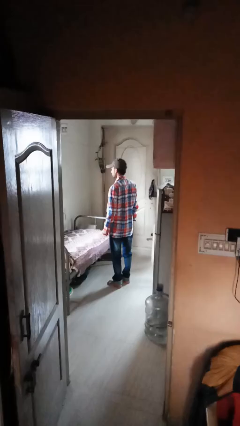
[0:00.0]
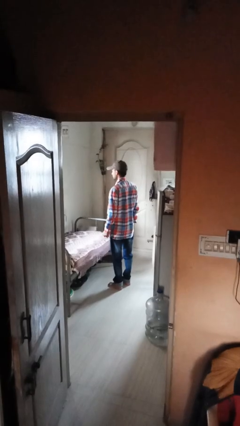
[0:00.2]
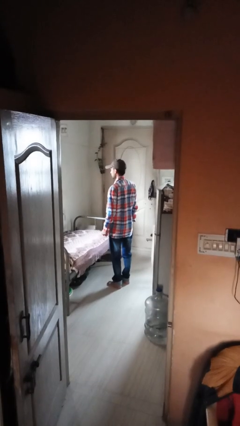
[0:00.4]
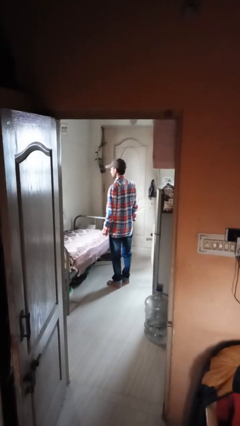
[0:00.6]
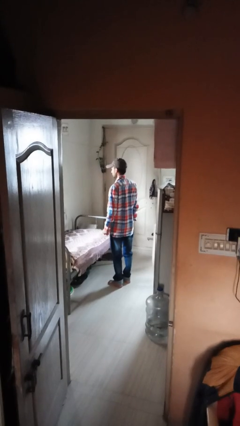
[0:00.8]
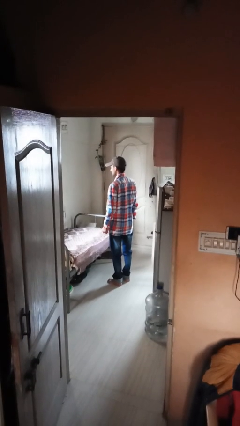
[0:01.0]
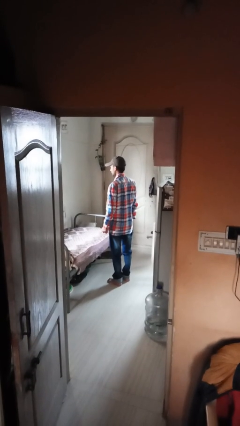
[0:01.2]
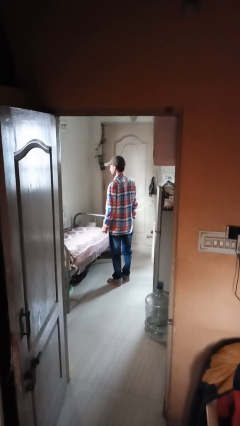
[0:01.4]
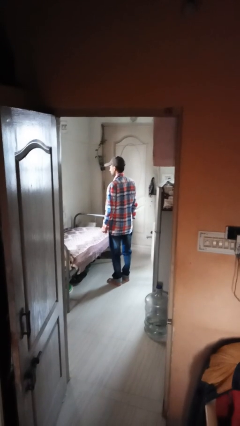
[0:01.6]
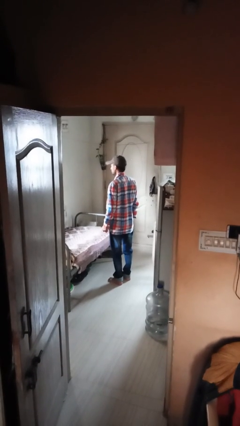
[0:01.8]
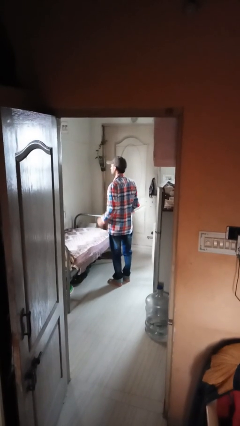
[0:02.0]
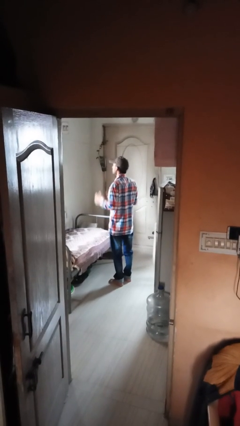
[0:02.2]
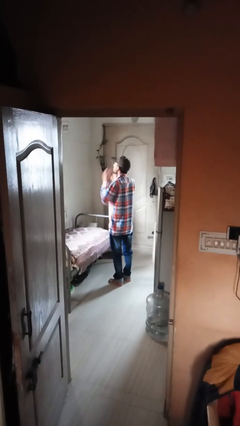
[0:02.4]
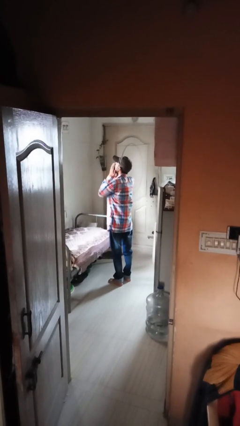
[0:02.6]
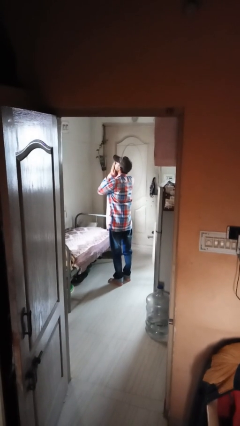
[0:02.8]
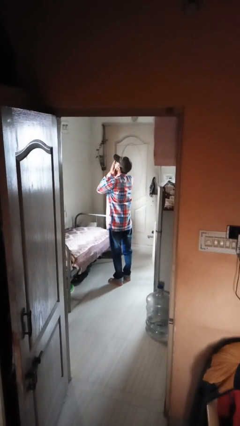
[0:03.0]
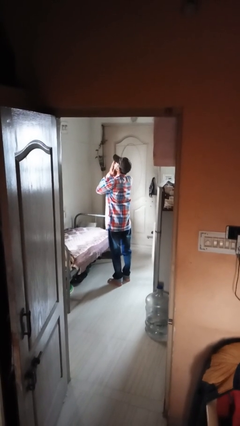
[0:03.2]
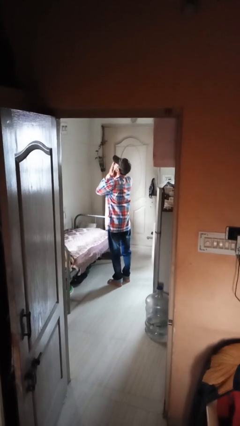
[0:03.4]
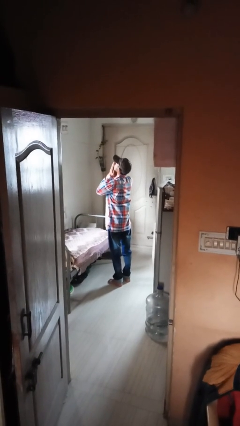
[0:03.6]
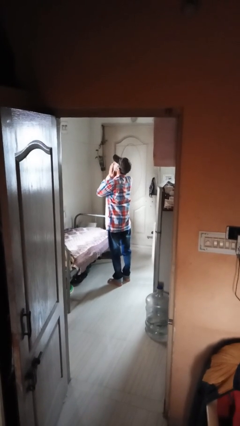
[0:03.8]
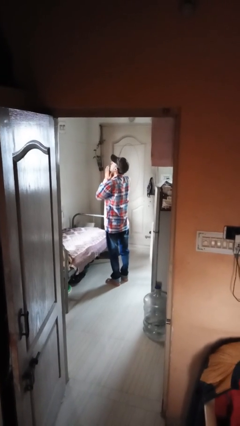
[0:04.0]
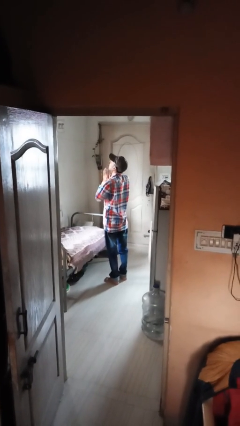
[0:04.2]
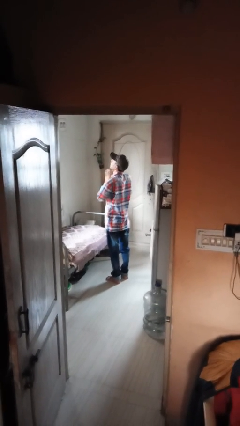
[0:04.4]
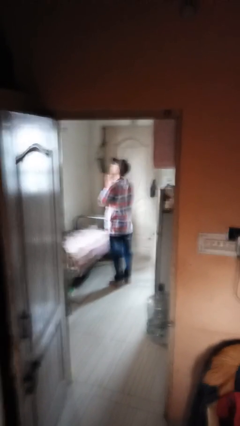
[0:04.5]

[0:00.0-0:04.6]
person yawns

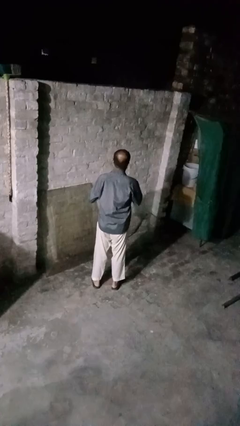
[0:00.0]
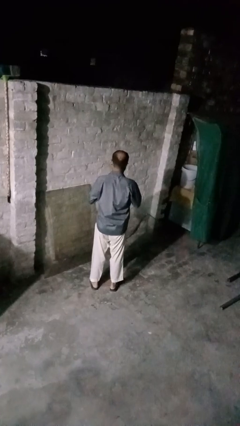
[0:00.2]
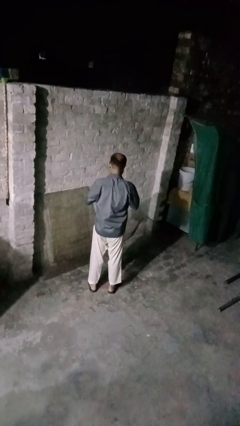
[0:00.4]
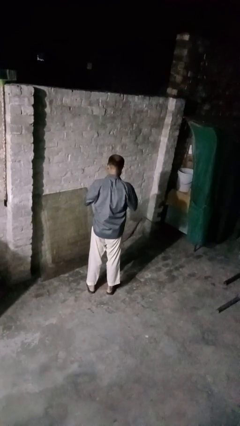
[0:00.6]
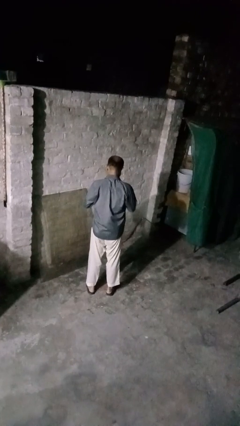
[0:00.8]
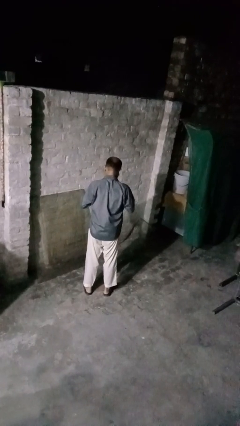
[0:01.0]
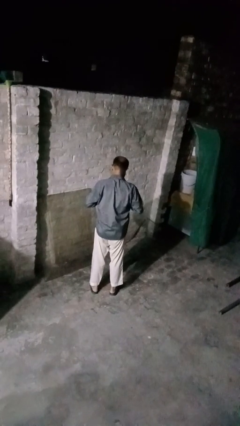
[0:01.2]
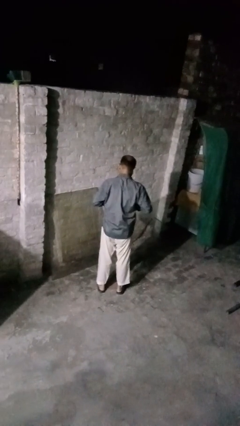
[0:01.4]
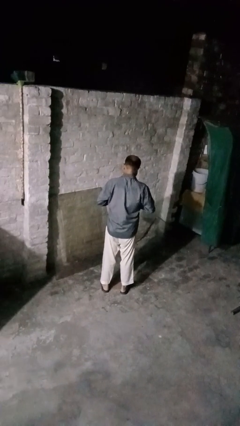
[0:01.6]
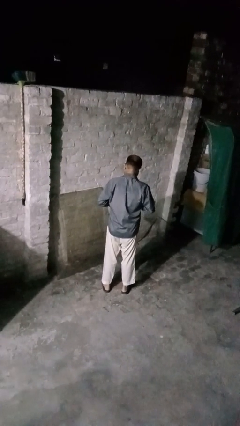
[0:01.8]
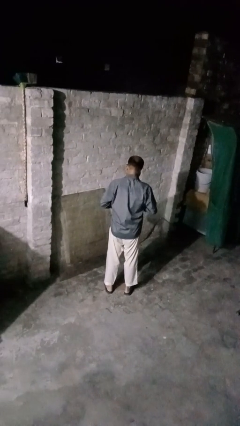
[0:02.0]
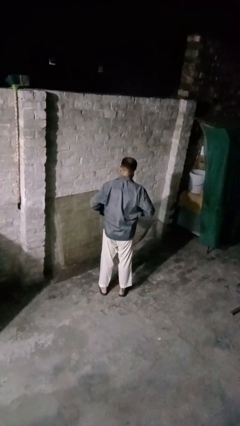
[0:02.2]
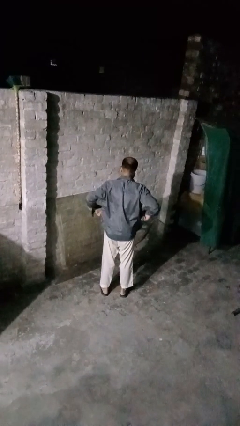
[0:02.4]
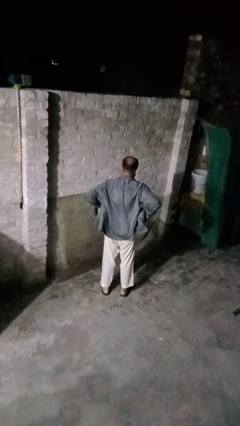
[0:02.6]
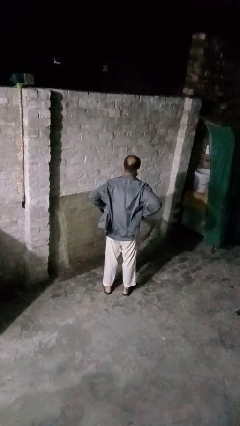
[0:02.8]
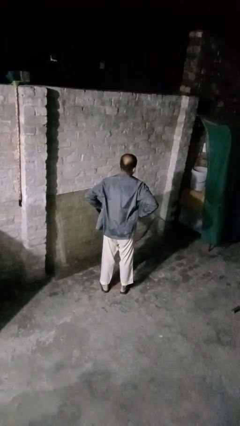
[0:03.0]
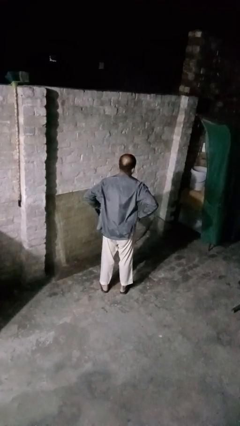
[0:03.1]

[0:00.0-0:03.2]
person unbuttons shirt

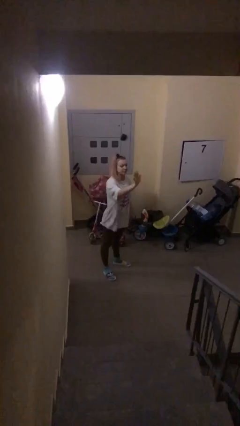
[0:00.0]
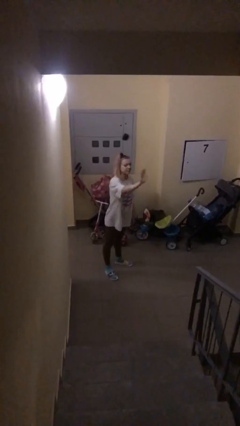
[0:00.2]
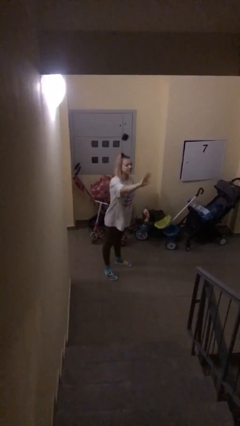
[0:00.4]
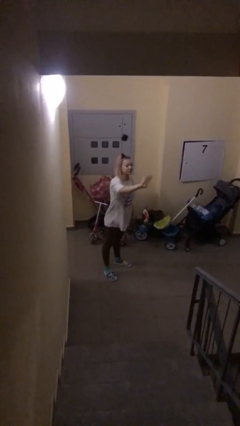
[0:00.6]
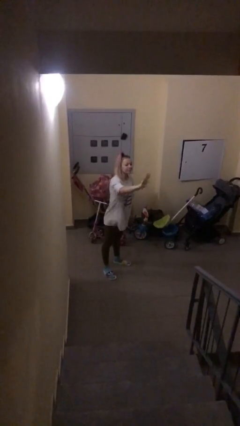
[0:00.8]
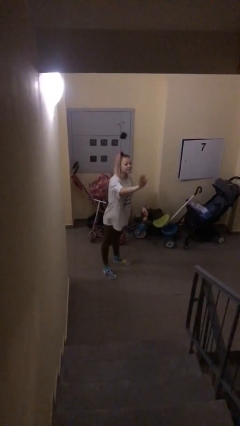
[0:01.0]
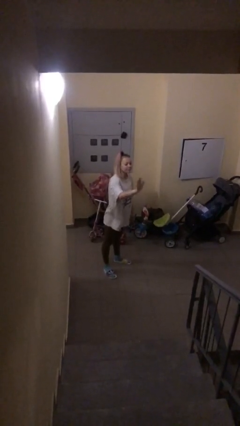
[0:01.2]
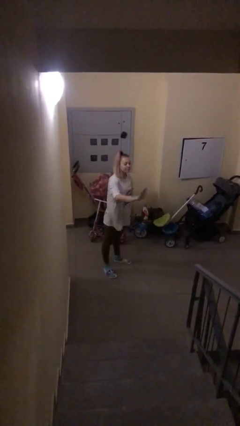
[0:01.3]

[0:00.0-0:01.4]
person waves at person

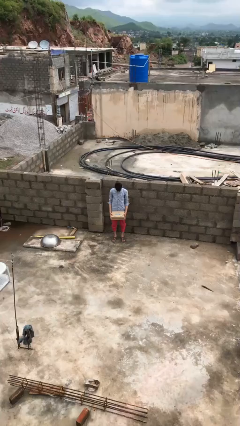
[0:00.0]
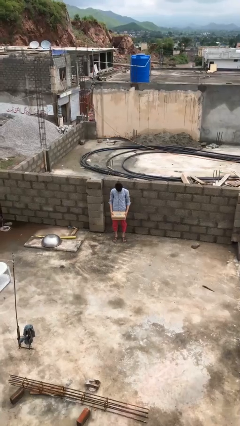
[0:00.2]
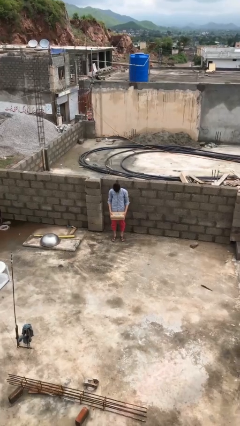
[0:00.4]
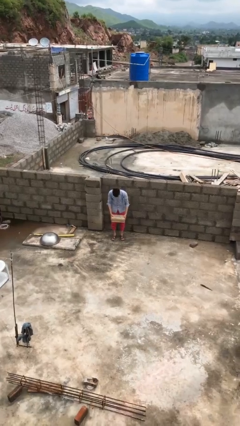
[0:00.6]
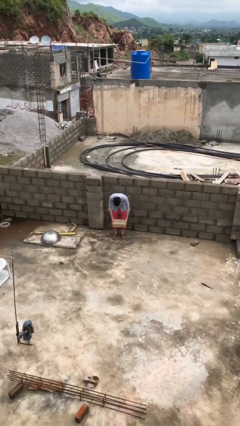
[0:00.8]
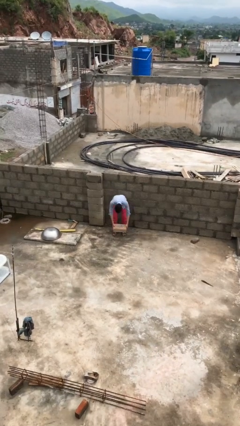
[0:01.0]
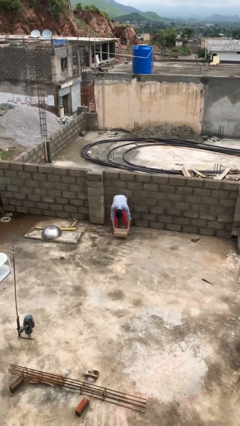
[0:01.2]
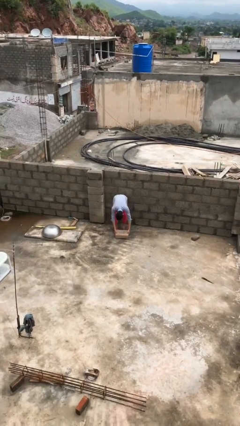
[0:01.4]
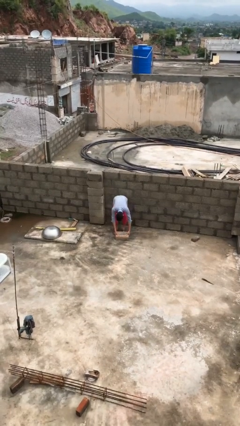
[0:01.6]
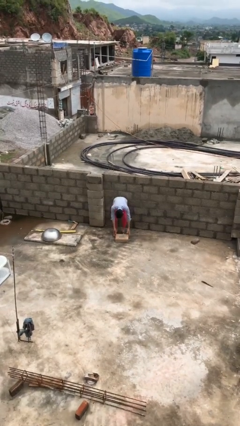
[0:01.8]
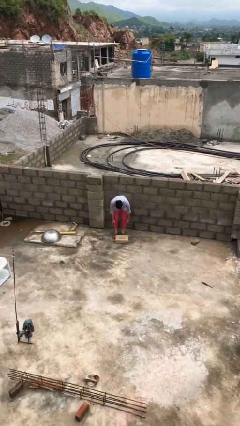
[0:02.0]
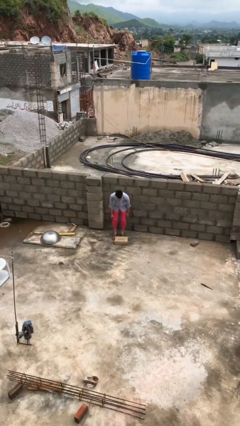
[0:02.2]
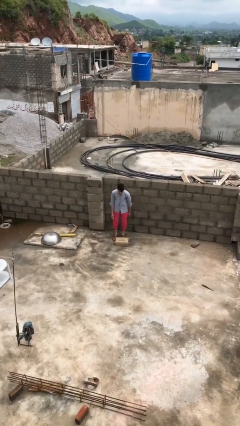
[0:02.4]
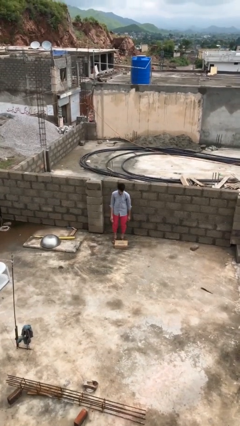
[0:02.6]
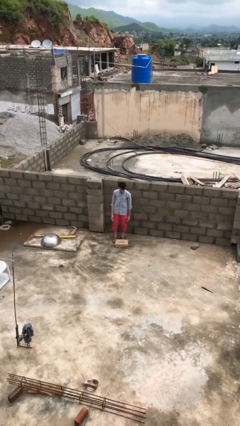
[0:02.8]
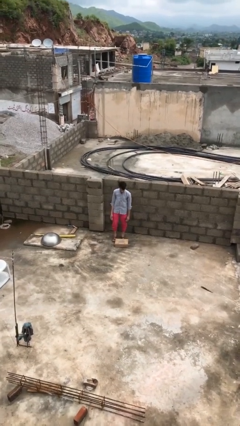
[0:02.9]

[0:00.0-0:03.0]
person puts down object on floor

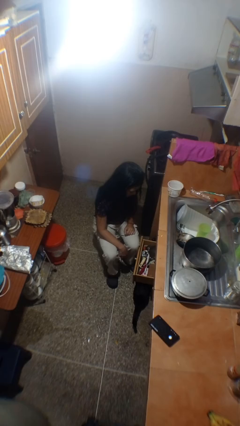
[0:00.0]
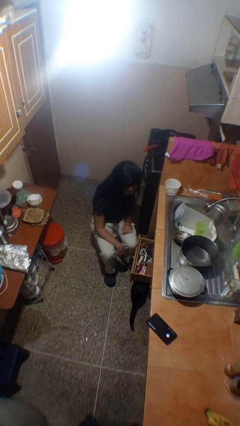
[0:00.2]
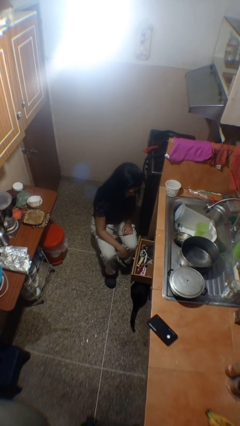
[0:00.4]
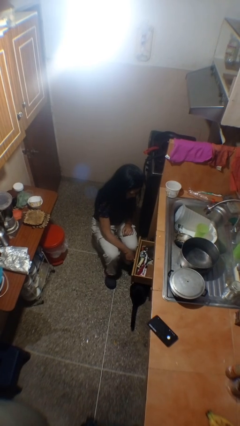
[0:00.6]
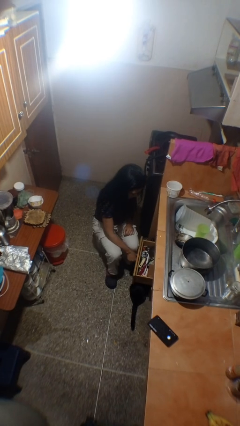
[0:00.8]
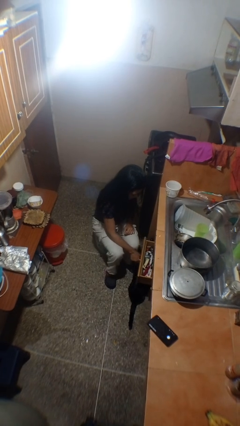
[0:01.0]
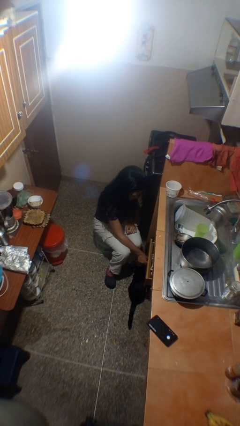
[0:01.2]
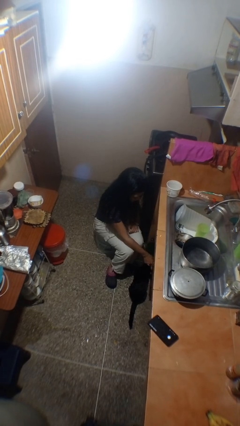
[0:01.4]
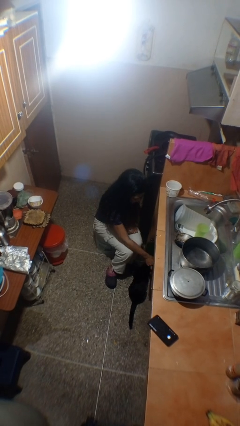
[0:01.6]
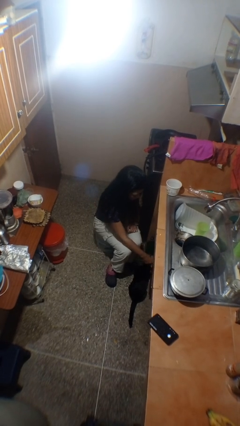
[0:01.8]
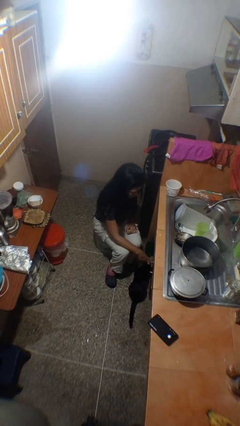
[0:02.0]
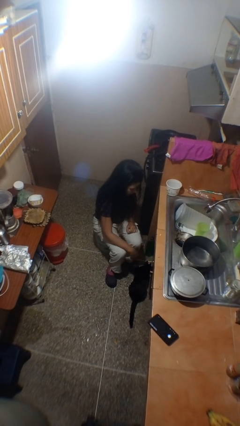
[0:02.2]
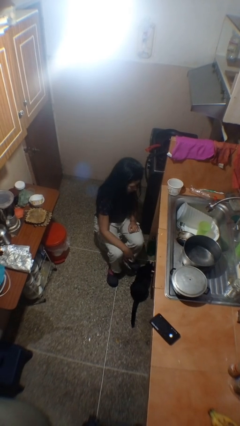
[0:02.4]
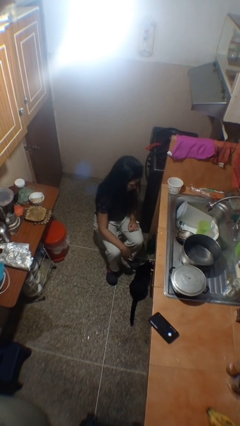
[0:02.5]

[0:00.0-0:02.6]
person closes kitchen drawer

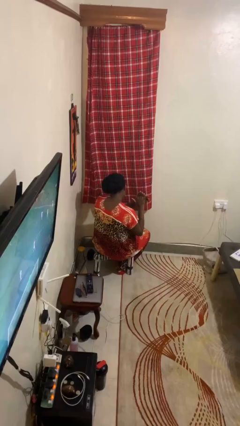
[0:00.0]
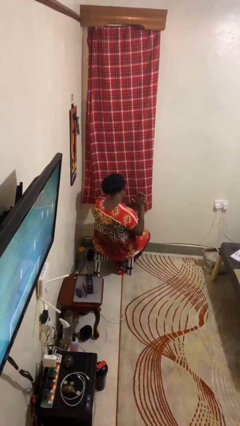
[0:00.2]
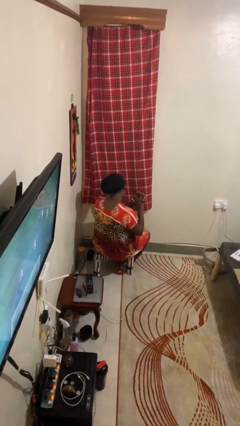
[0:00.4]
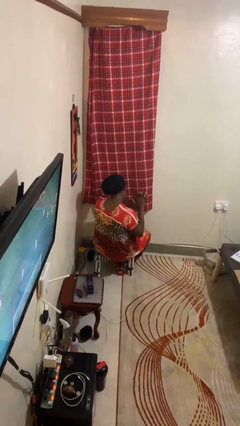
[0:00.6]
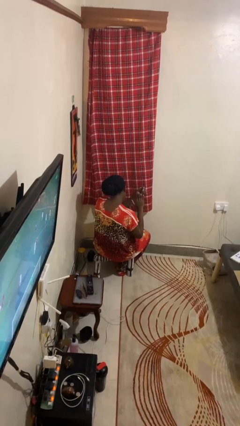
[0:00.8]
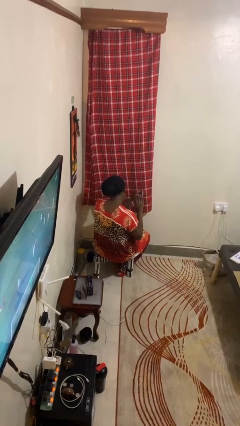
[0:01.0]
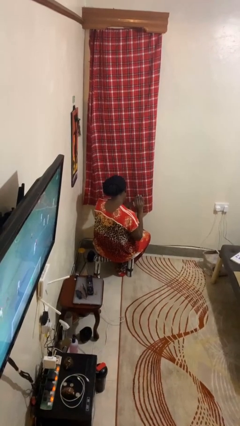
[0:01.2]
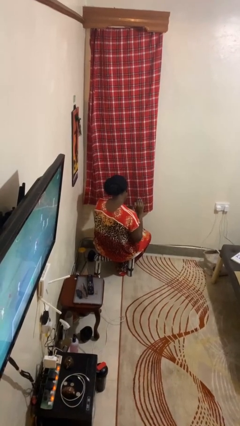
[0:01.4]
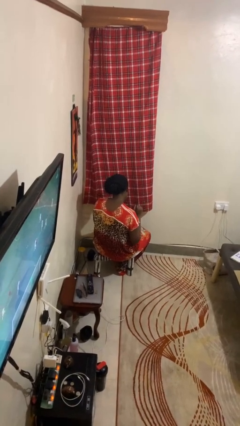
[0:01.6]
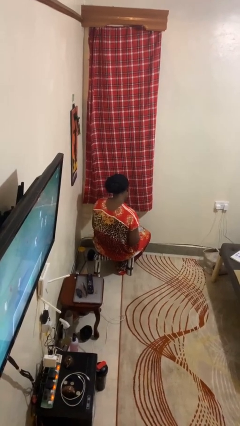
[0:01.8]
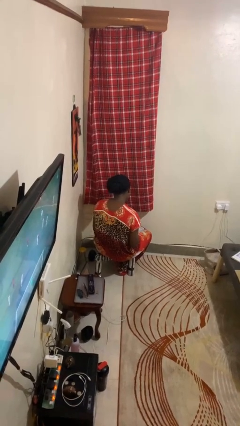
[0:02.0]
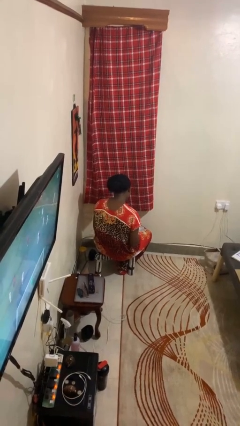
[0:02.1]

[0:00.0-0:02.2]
person takes off ring

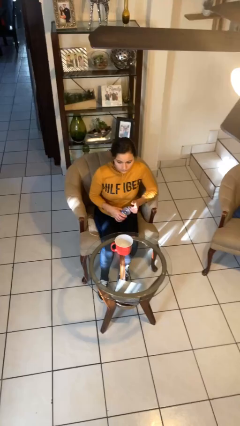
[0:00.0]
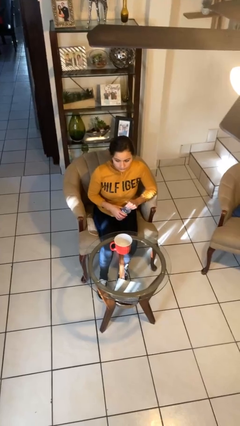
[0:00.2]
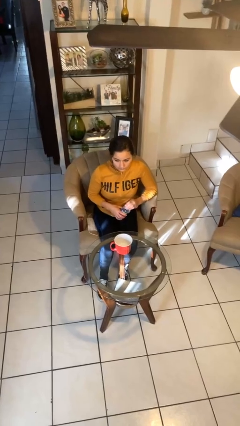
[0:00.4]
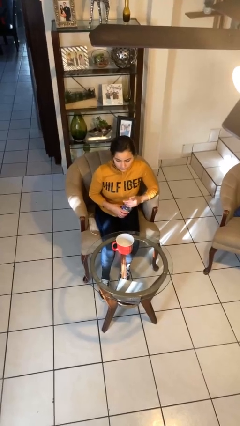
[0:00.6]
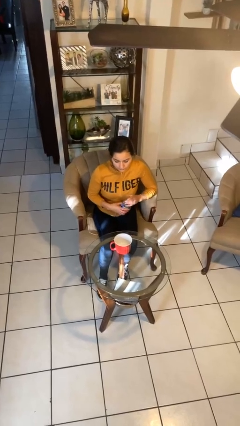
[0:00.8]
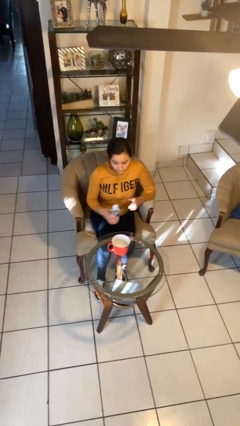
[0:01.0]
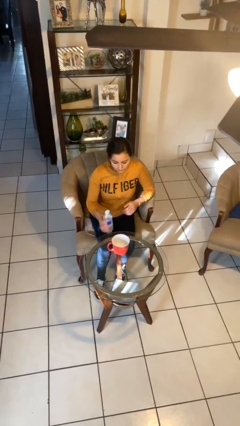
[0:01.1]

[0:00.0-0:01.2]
person screws lid to bottle
